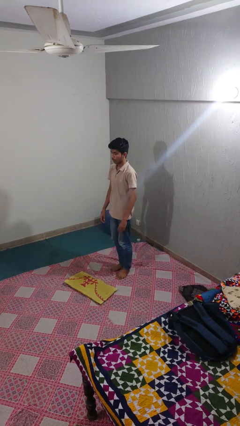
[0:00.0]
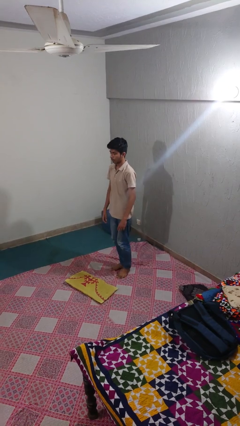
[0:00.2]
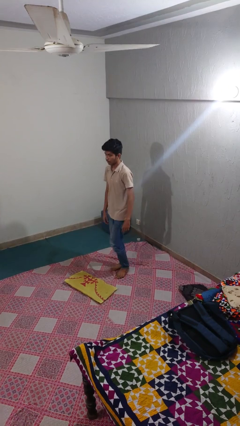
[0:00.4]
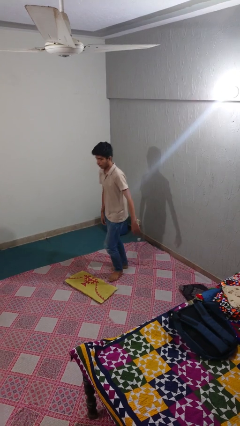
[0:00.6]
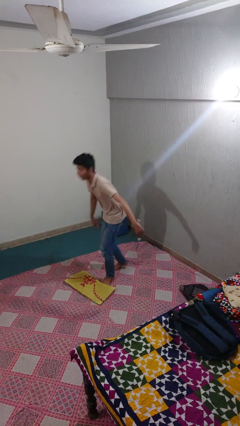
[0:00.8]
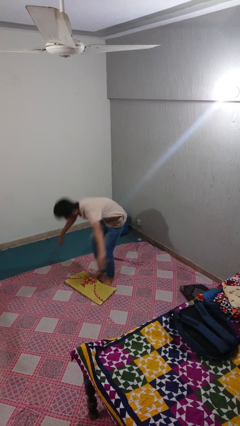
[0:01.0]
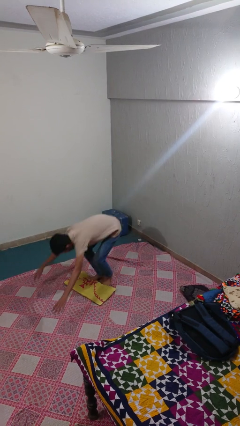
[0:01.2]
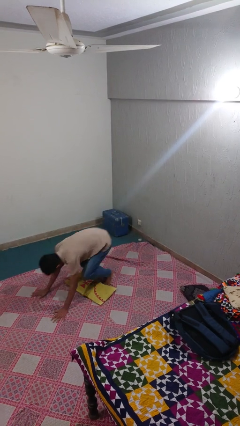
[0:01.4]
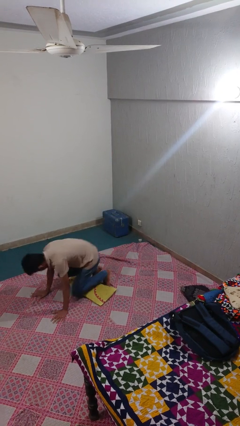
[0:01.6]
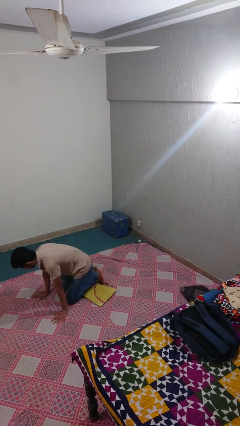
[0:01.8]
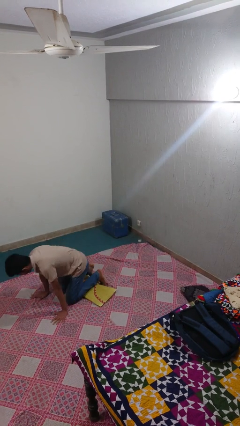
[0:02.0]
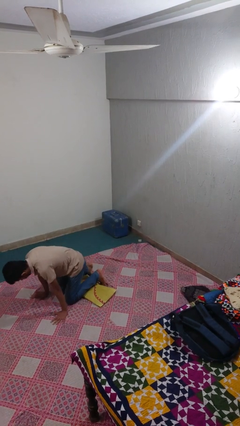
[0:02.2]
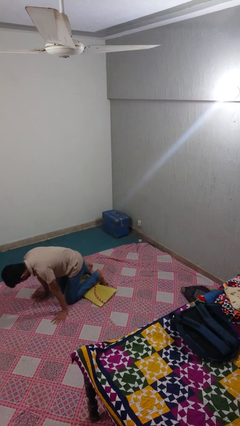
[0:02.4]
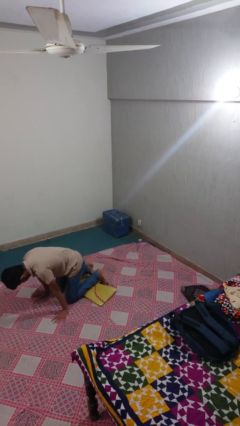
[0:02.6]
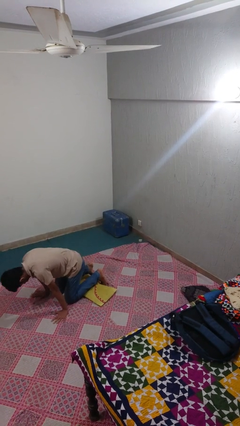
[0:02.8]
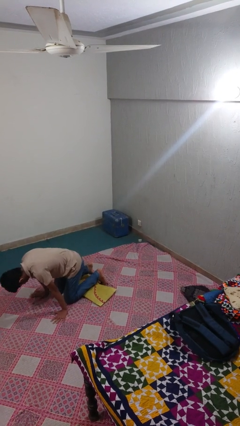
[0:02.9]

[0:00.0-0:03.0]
person stands up from floor

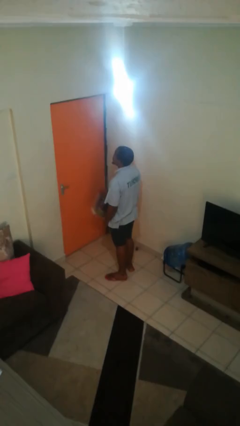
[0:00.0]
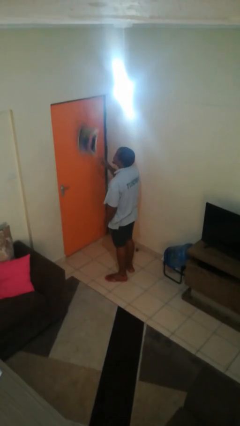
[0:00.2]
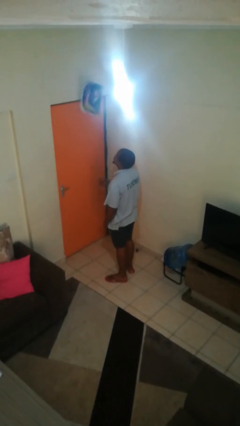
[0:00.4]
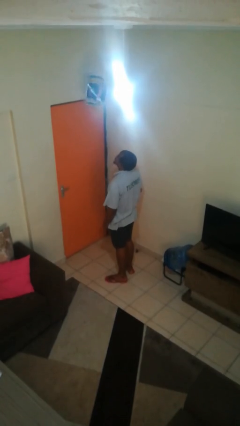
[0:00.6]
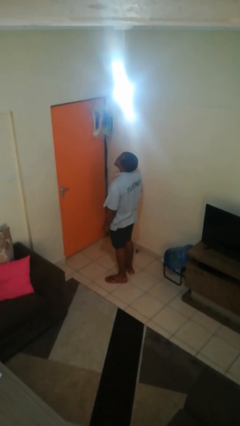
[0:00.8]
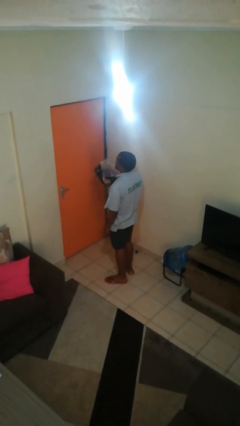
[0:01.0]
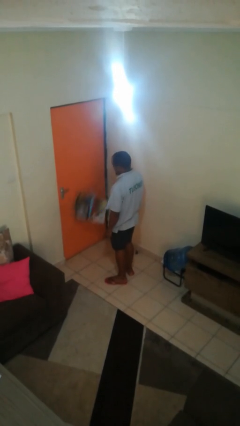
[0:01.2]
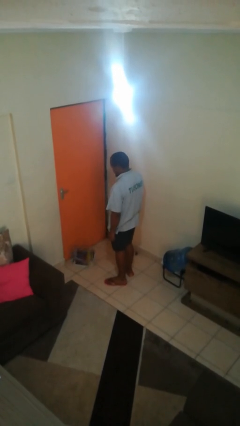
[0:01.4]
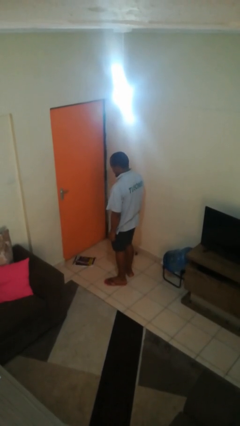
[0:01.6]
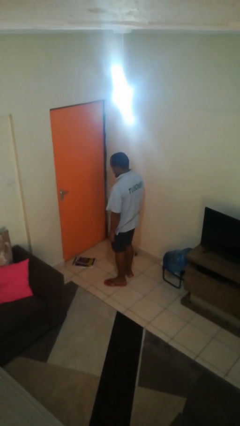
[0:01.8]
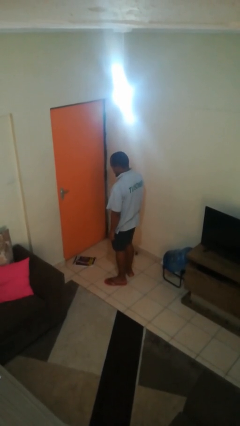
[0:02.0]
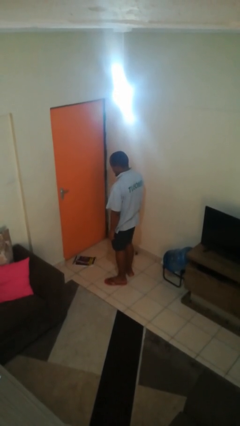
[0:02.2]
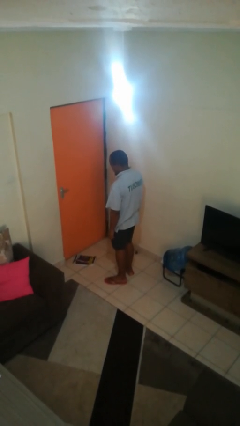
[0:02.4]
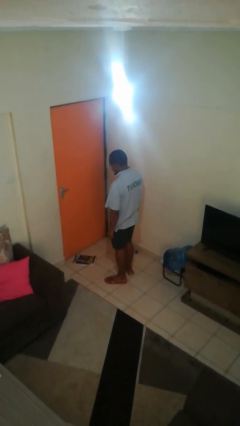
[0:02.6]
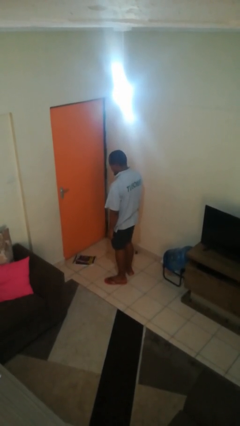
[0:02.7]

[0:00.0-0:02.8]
person throws object into air

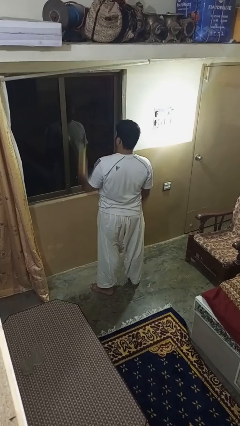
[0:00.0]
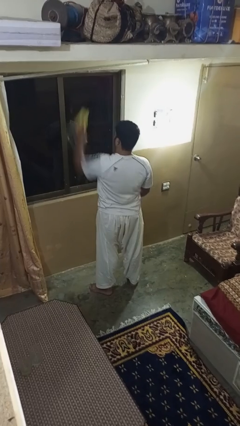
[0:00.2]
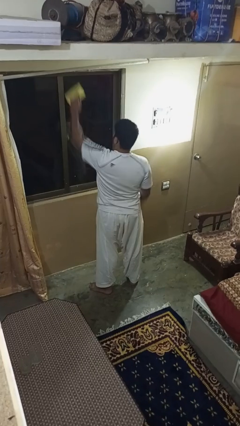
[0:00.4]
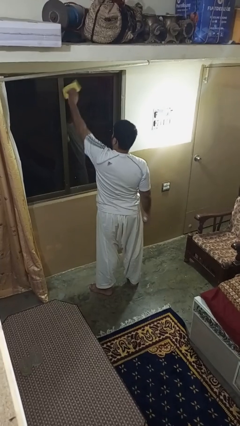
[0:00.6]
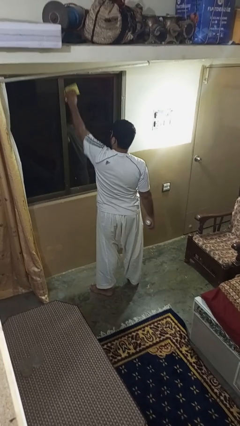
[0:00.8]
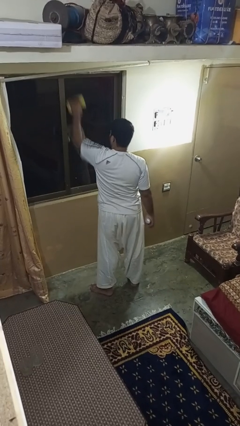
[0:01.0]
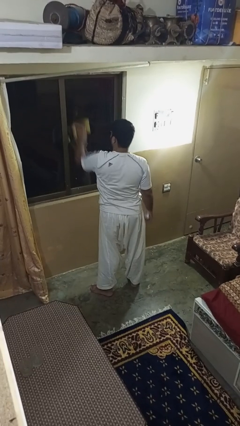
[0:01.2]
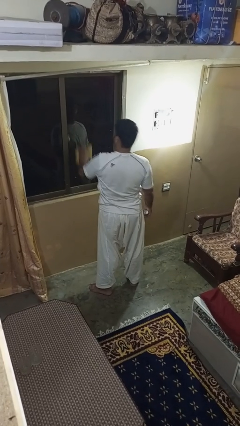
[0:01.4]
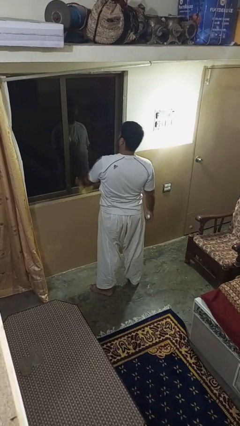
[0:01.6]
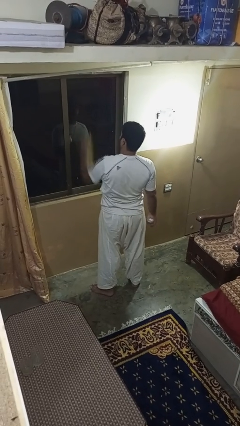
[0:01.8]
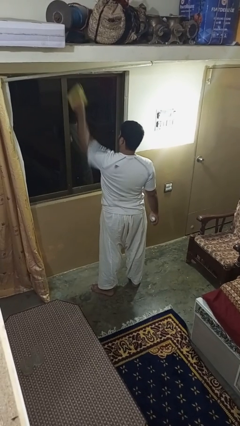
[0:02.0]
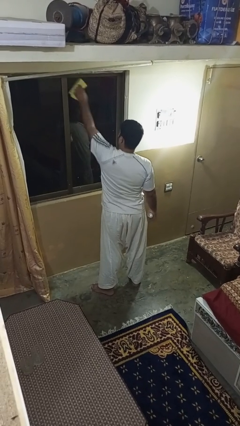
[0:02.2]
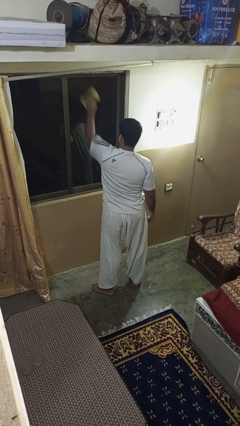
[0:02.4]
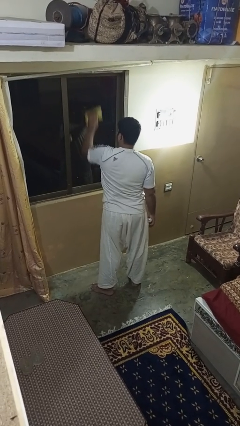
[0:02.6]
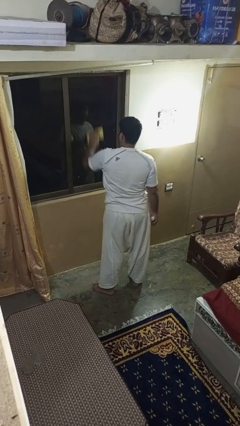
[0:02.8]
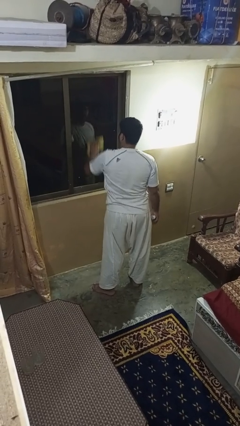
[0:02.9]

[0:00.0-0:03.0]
person washes window

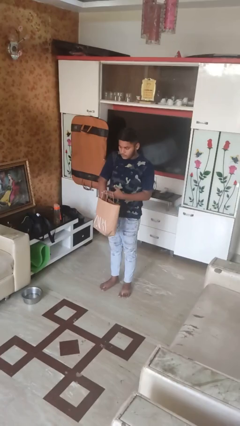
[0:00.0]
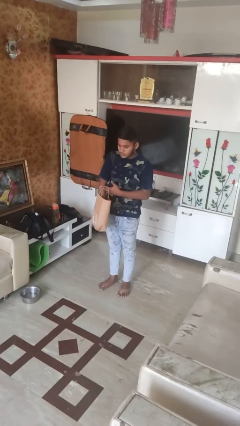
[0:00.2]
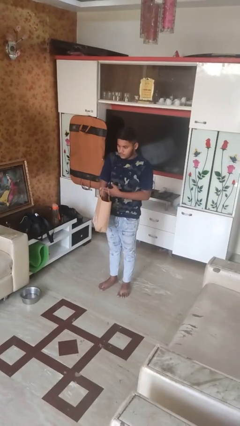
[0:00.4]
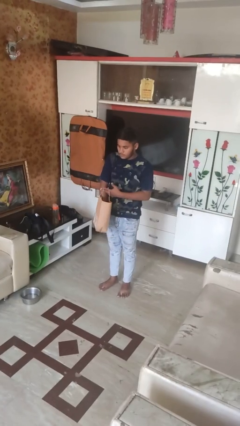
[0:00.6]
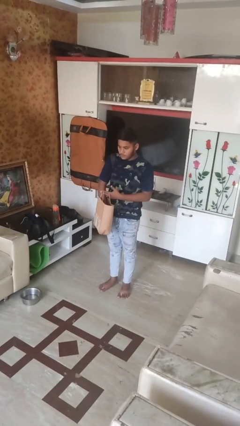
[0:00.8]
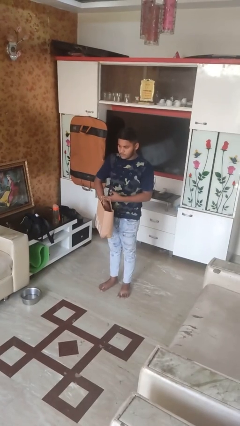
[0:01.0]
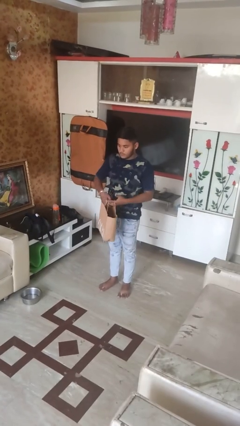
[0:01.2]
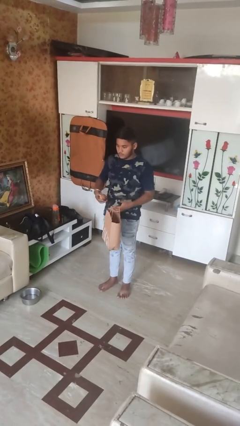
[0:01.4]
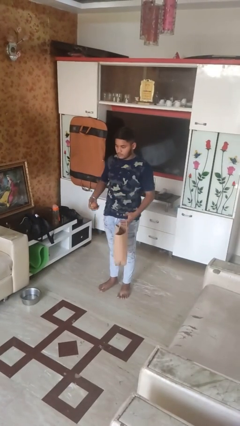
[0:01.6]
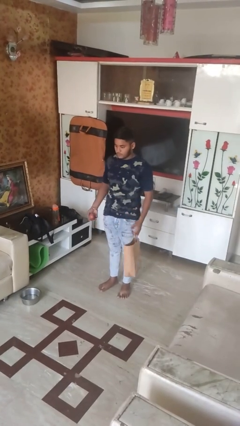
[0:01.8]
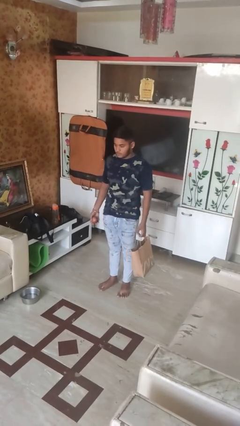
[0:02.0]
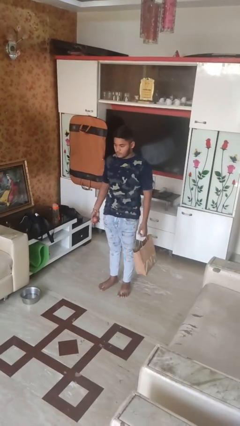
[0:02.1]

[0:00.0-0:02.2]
person takes object from bag

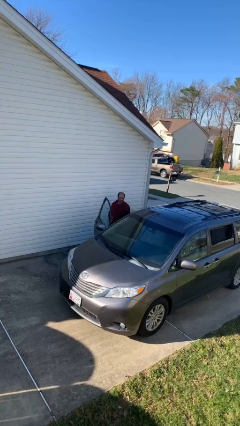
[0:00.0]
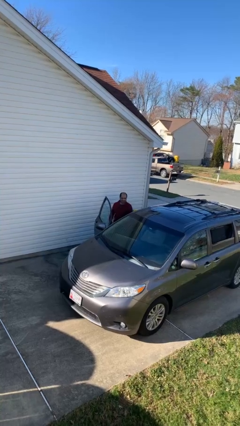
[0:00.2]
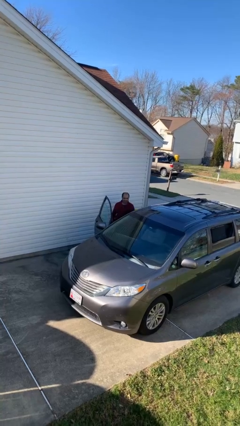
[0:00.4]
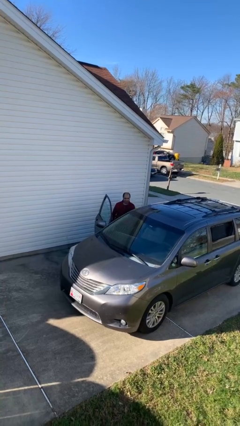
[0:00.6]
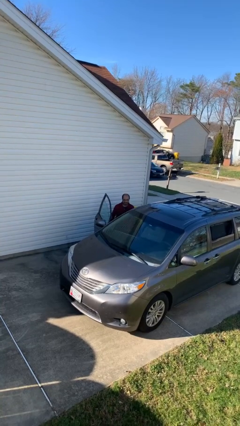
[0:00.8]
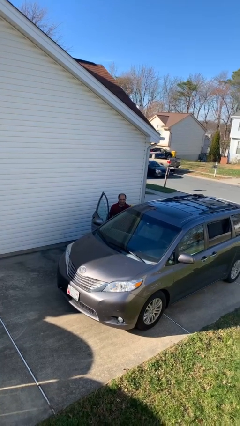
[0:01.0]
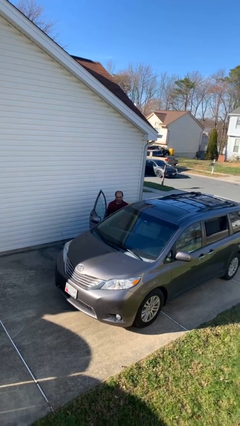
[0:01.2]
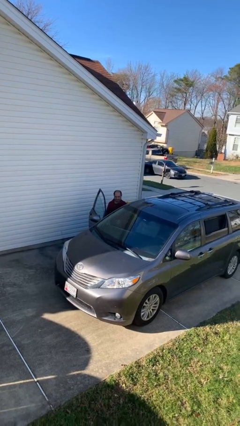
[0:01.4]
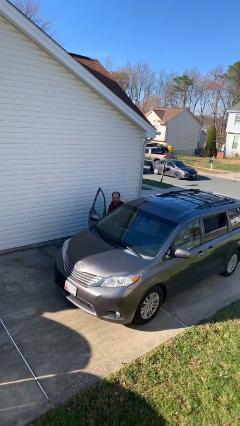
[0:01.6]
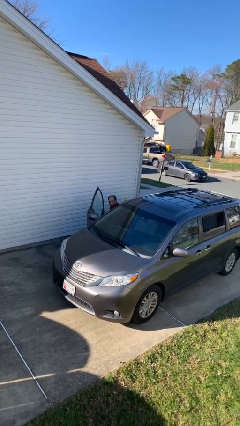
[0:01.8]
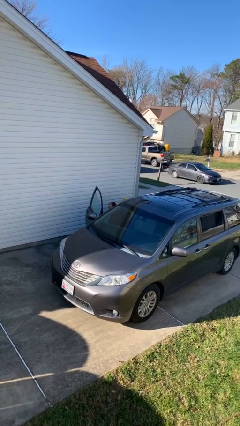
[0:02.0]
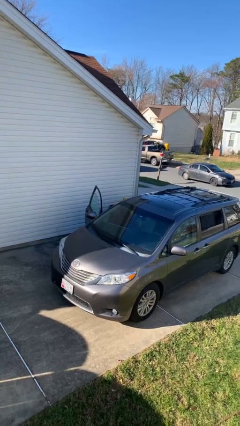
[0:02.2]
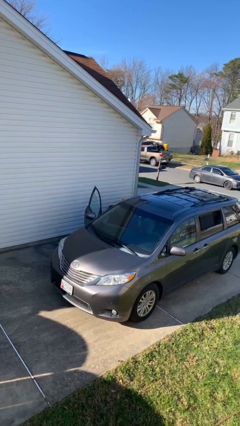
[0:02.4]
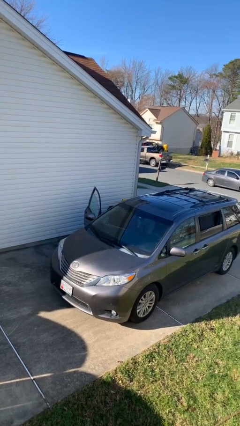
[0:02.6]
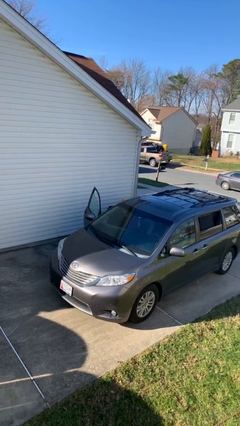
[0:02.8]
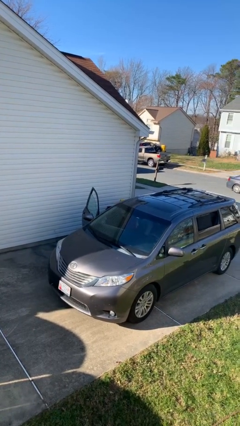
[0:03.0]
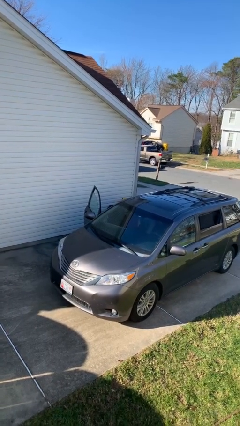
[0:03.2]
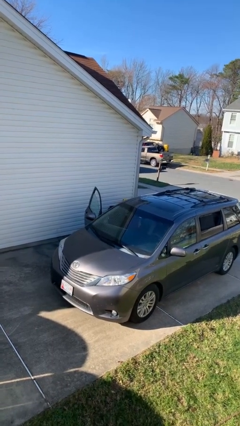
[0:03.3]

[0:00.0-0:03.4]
person enters car

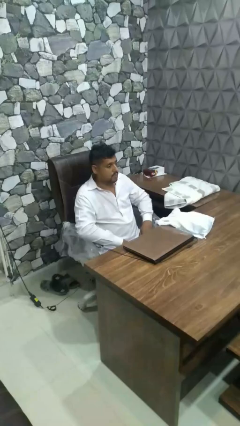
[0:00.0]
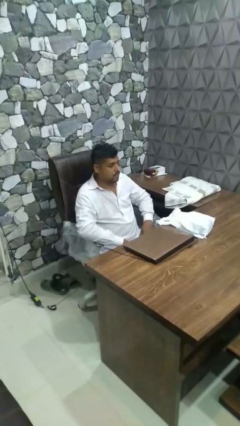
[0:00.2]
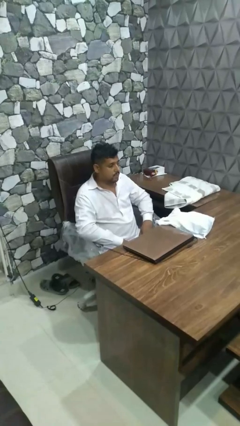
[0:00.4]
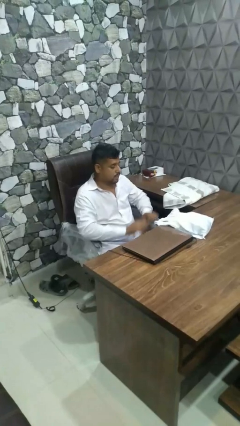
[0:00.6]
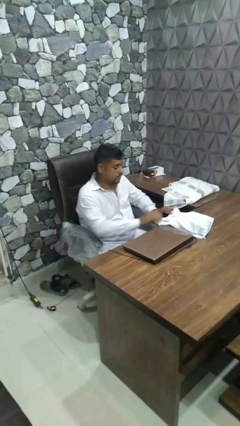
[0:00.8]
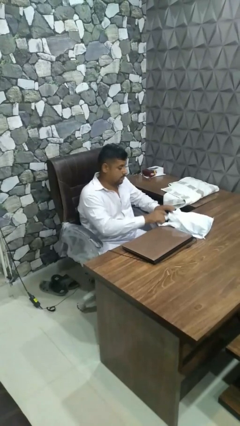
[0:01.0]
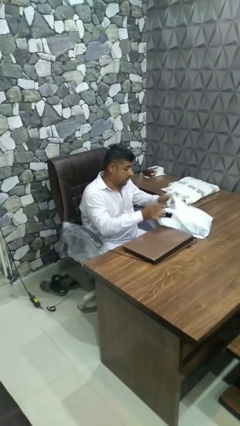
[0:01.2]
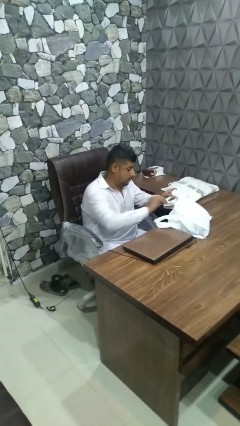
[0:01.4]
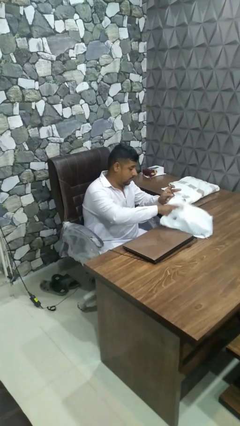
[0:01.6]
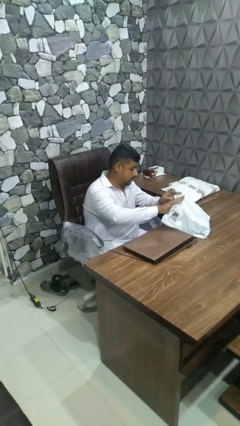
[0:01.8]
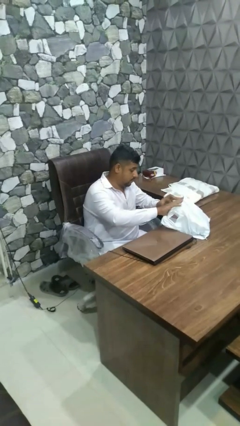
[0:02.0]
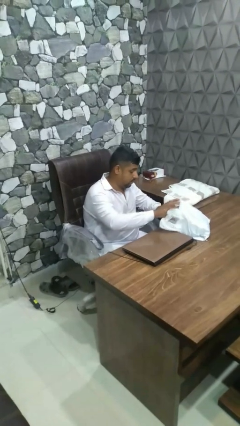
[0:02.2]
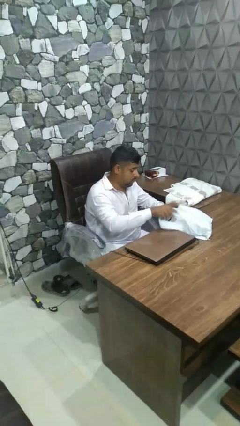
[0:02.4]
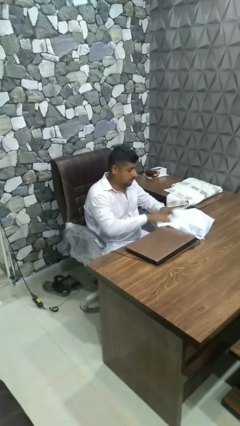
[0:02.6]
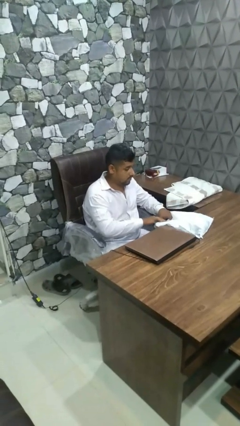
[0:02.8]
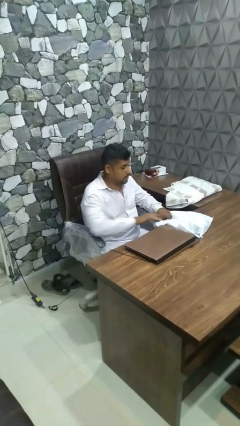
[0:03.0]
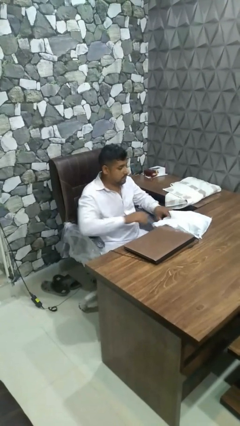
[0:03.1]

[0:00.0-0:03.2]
person searches in bag

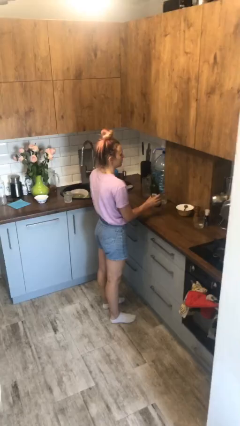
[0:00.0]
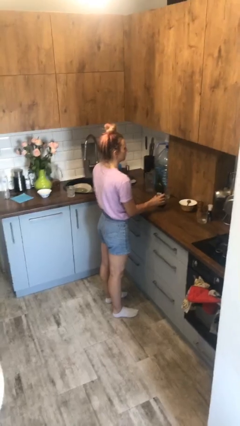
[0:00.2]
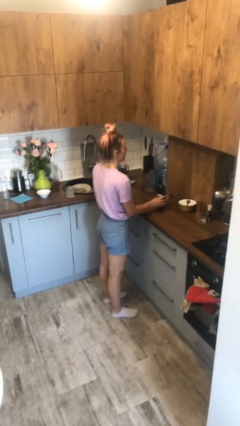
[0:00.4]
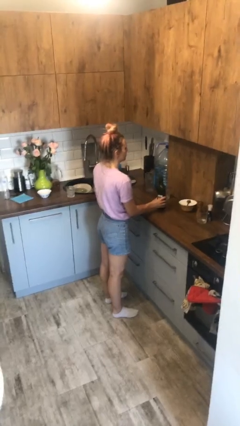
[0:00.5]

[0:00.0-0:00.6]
person puts down object on countertop
